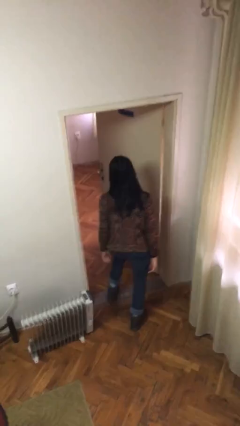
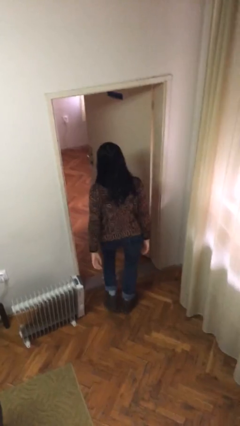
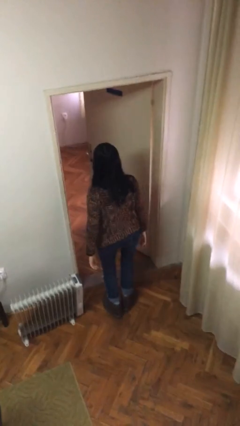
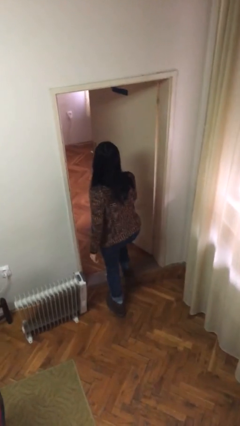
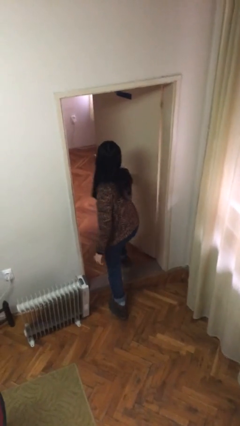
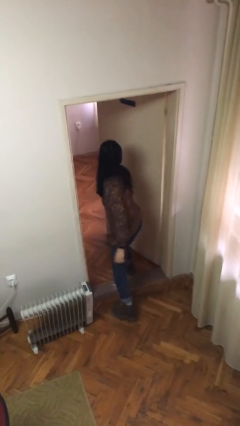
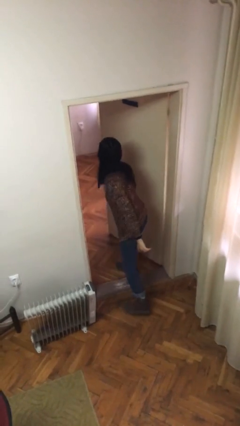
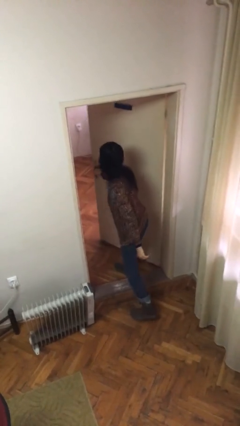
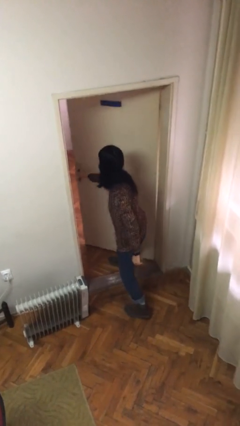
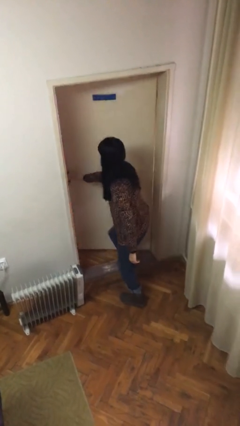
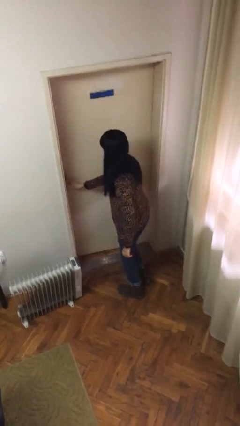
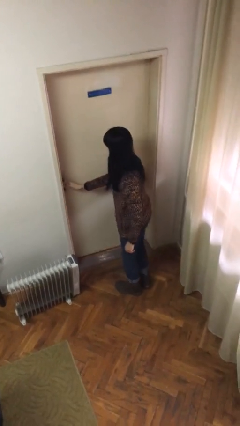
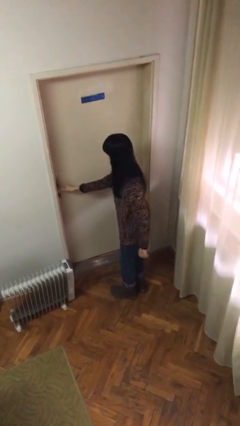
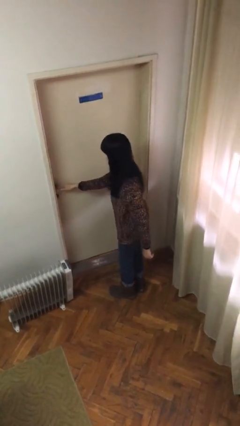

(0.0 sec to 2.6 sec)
person closes facility door

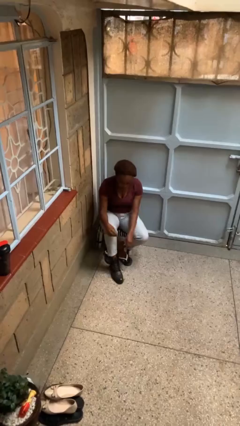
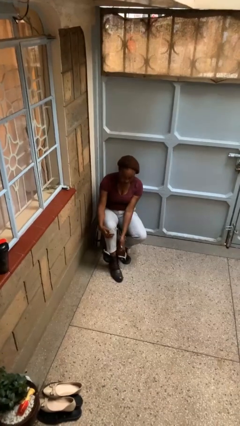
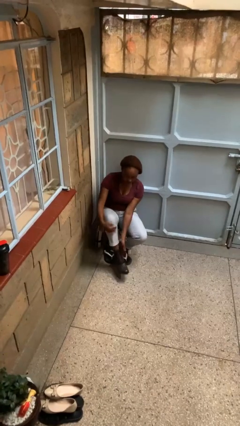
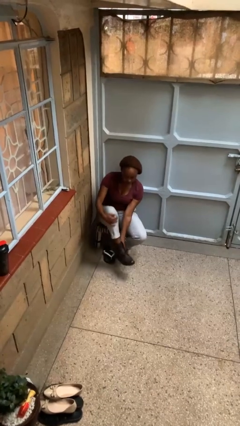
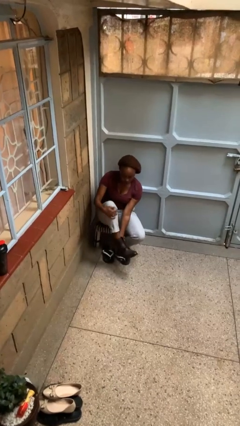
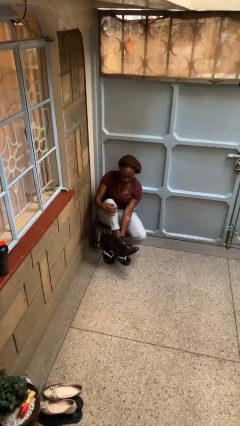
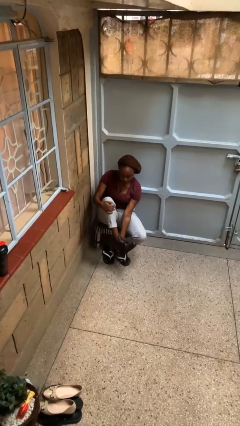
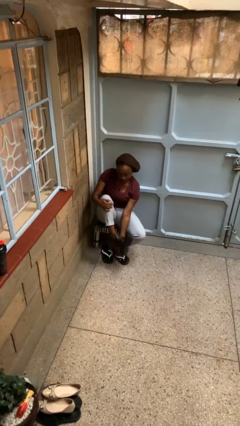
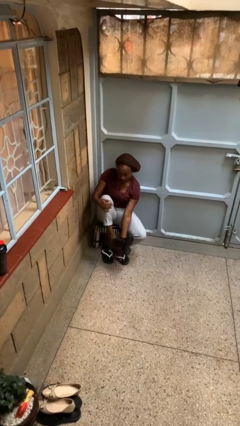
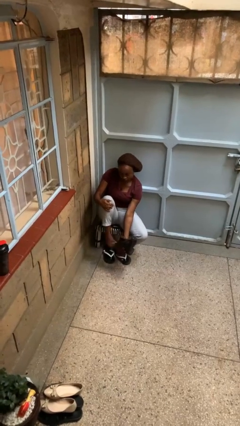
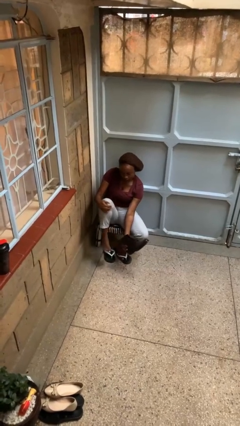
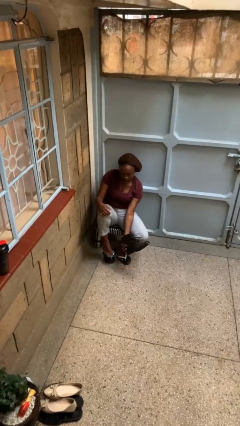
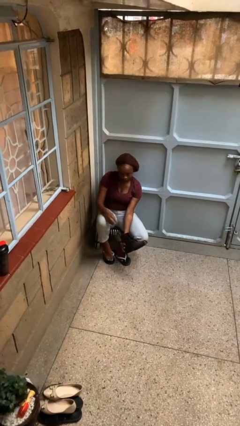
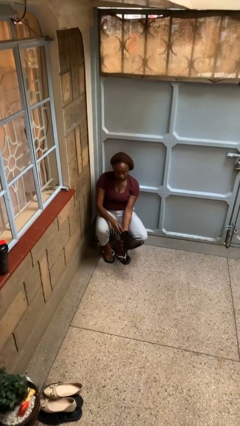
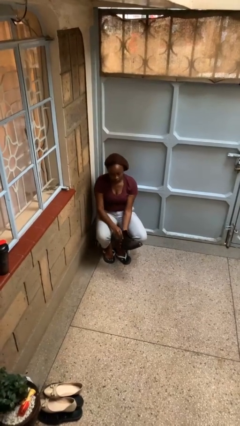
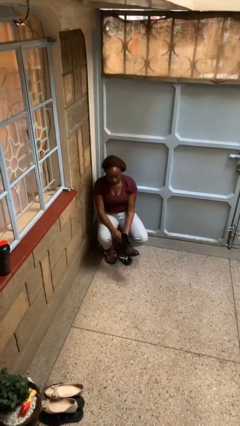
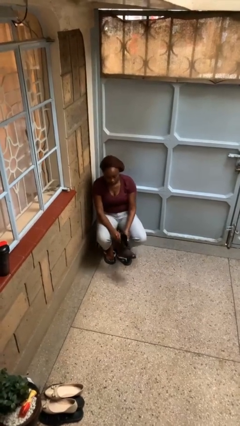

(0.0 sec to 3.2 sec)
person takes off boots

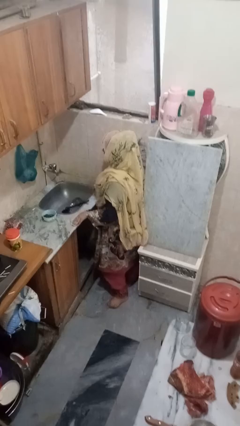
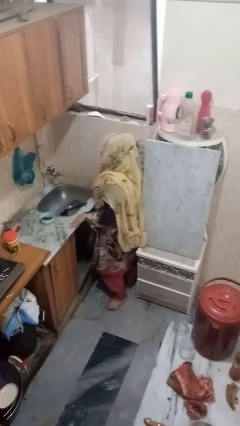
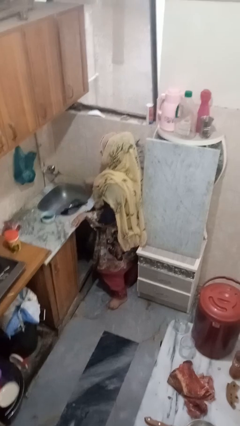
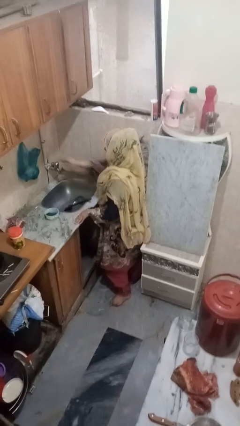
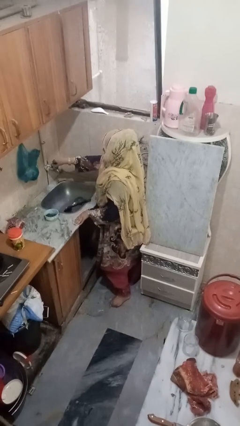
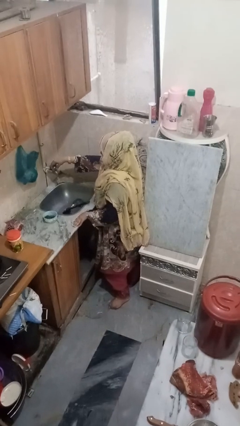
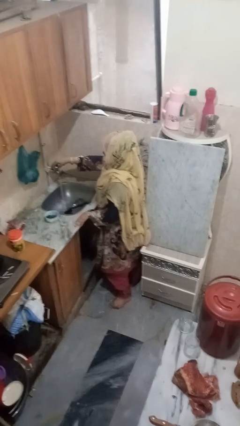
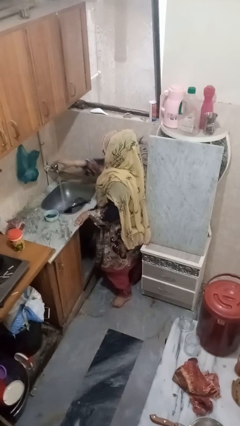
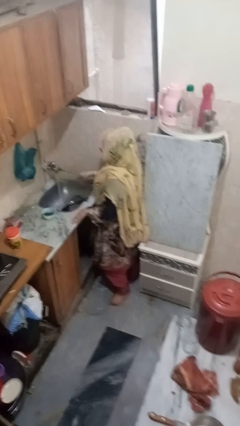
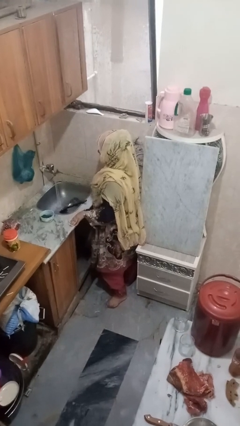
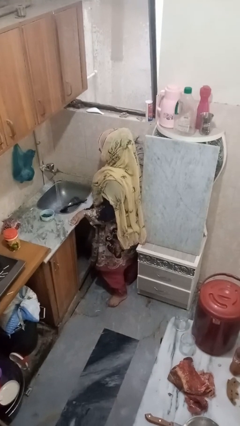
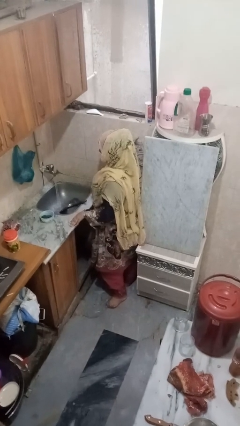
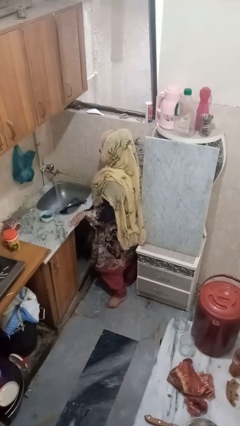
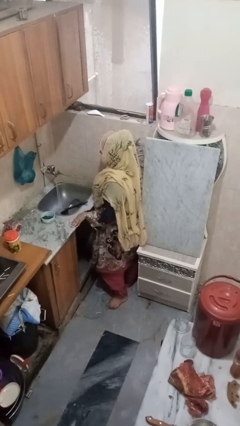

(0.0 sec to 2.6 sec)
person turns on faucet

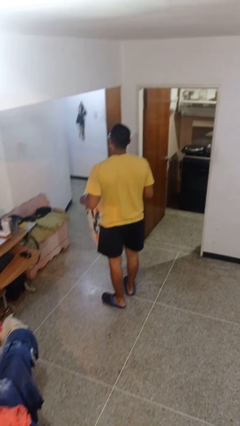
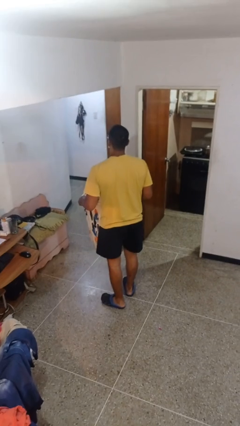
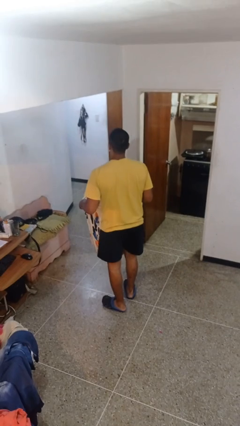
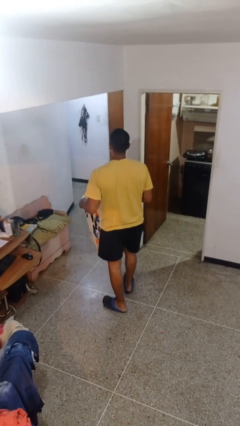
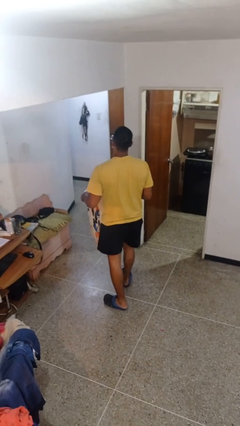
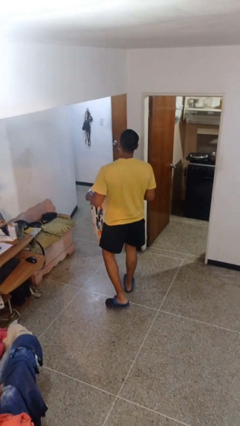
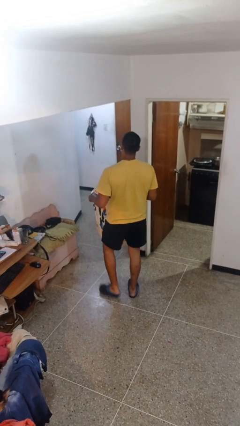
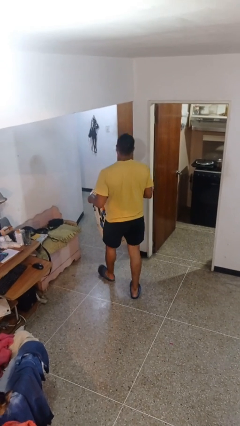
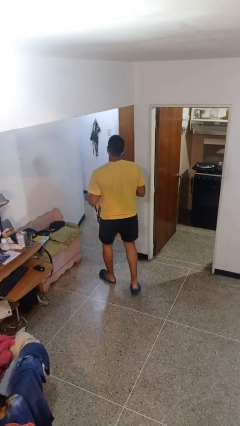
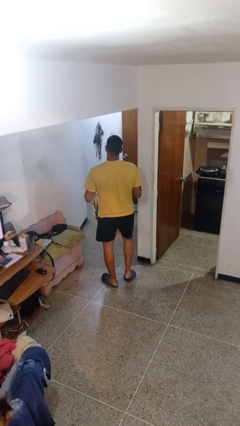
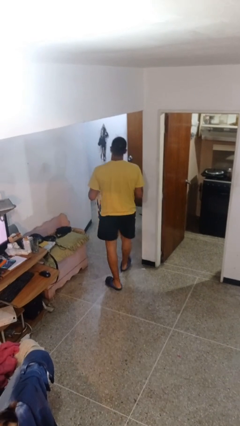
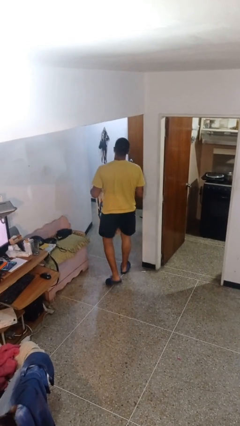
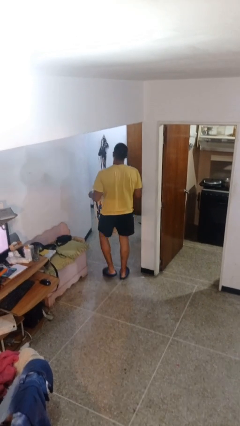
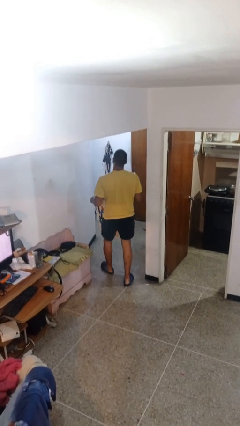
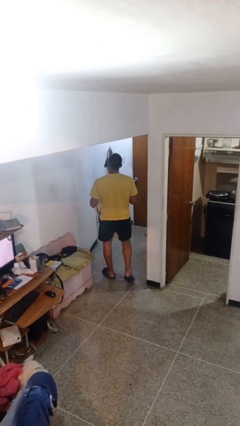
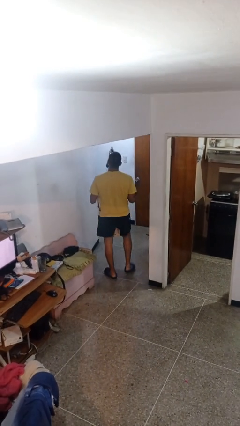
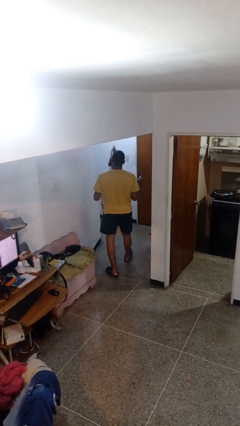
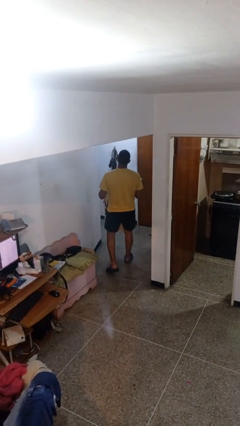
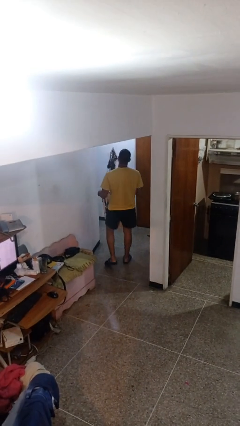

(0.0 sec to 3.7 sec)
person carries laundry basket

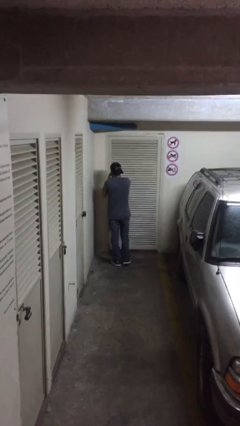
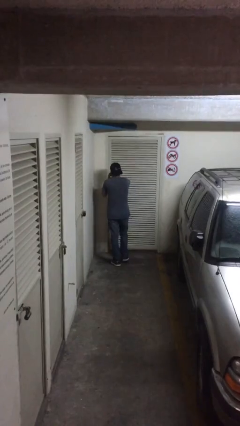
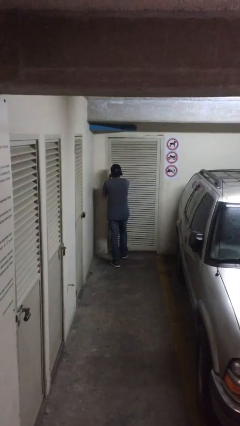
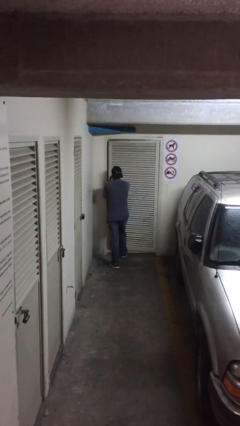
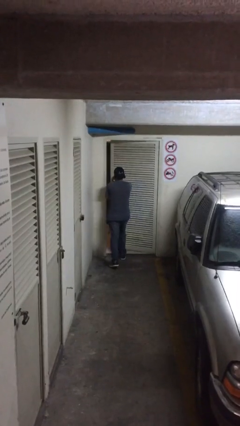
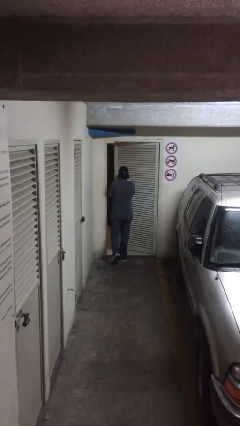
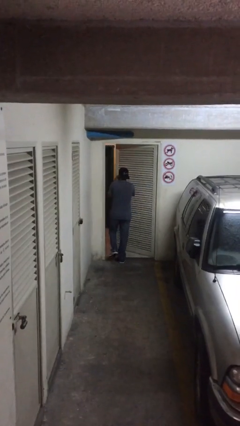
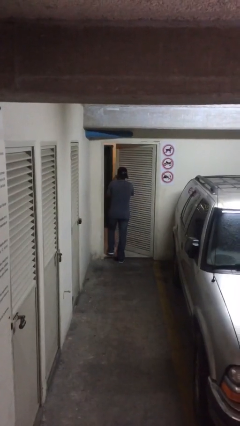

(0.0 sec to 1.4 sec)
person opens facility door

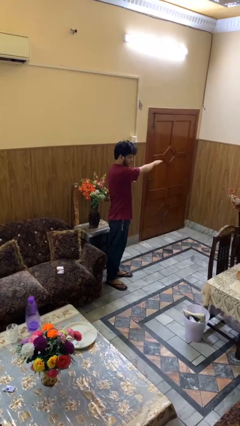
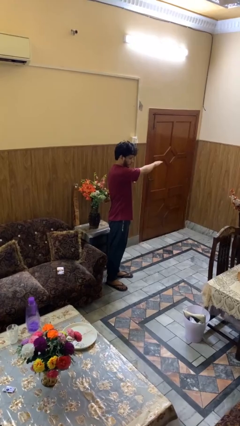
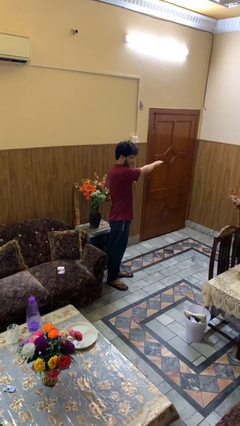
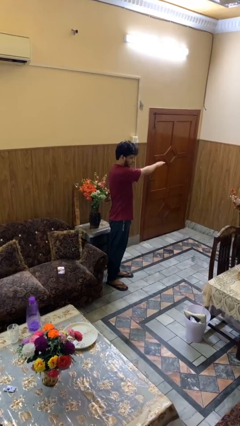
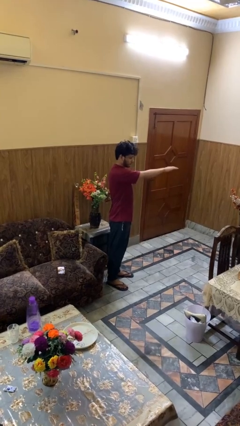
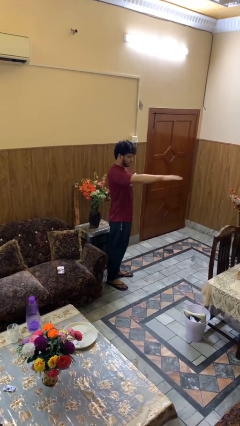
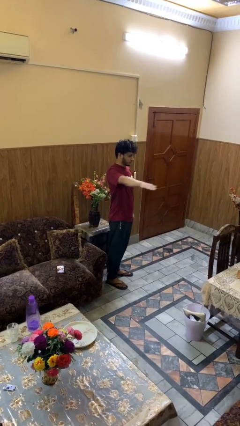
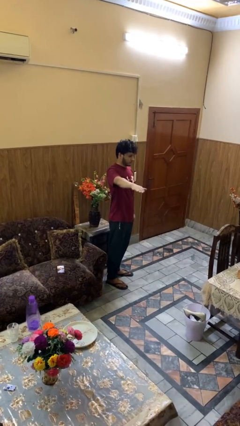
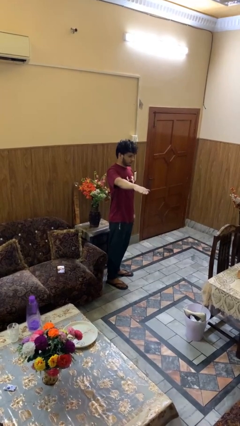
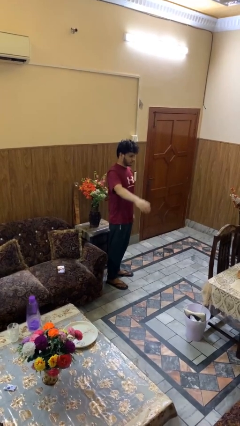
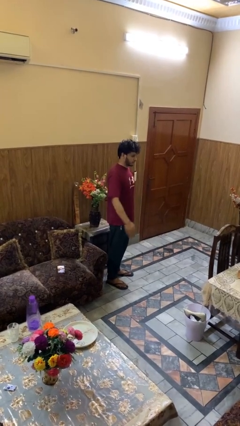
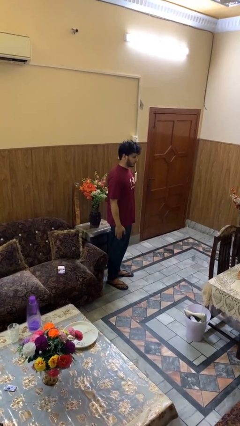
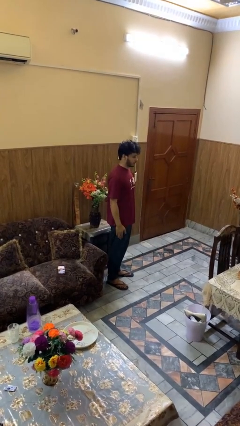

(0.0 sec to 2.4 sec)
person gestures swipe right

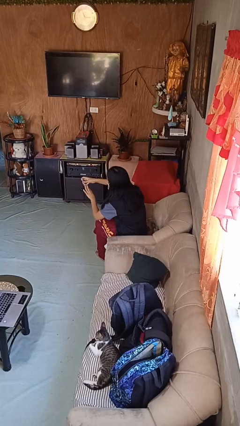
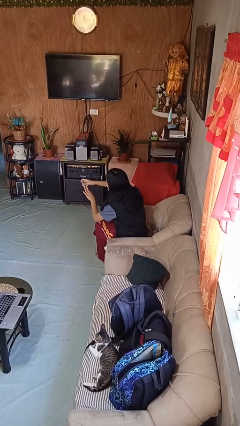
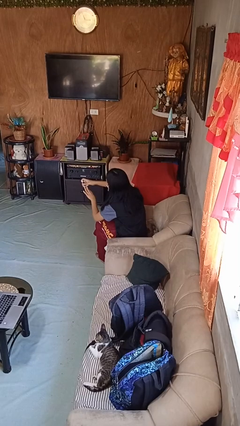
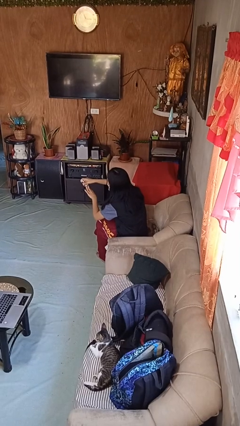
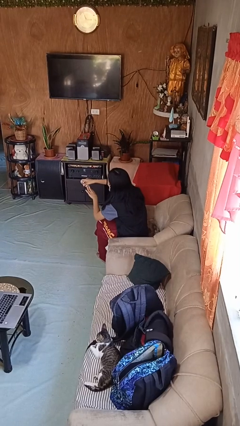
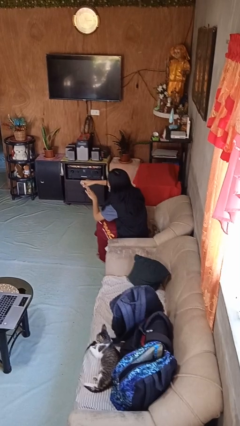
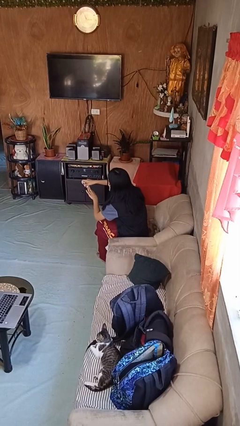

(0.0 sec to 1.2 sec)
person clips fingernails

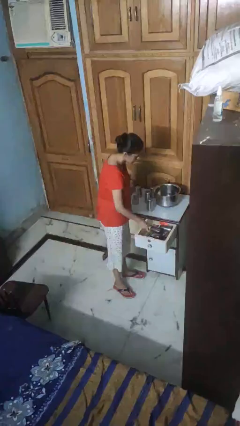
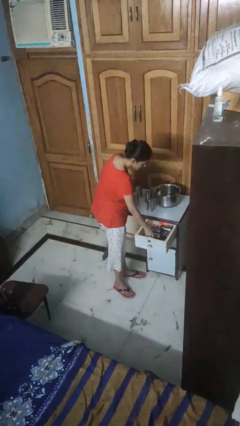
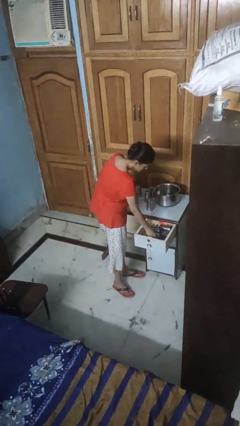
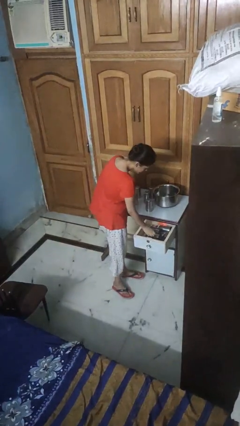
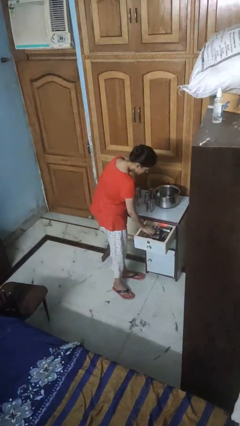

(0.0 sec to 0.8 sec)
person puts object into kitchen drawer
